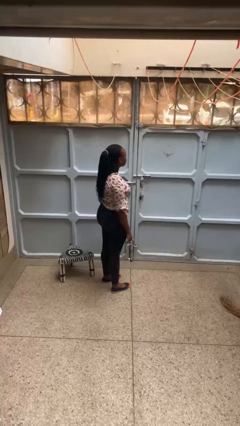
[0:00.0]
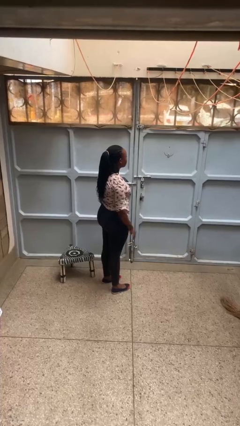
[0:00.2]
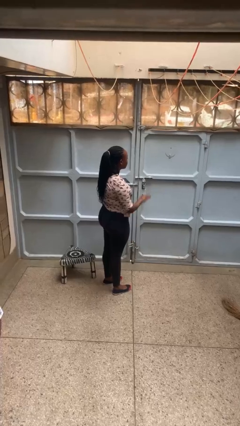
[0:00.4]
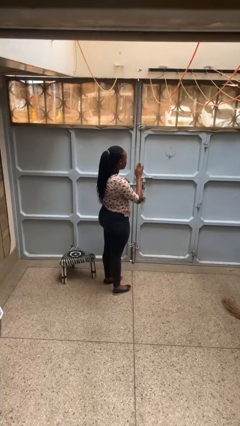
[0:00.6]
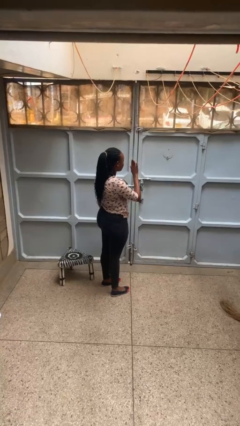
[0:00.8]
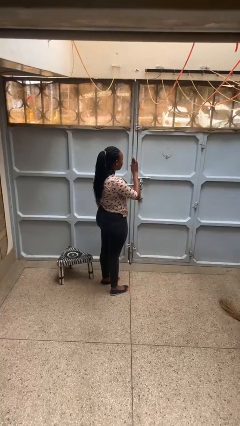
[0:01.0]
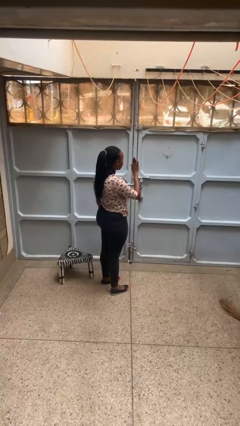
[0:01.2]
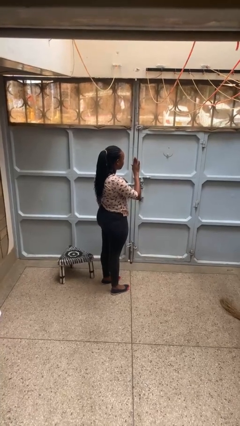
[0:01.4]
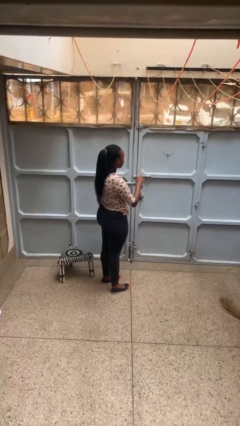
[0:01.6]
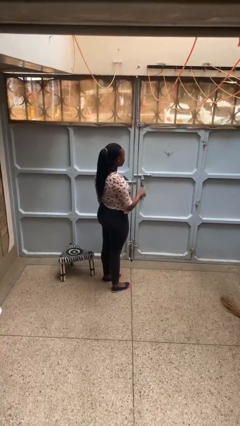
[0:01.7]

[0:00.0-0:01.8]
person gestures stop

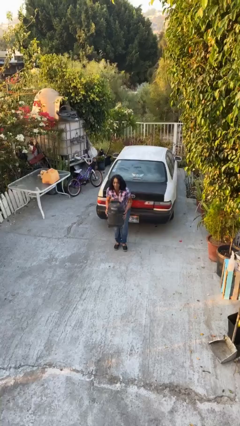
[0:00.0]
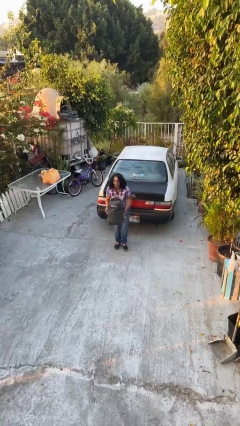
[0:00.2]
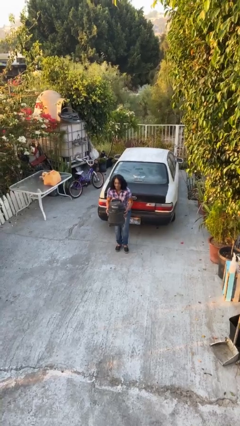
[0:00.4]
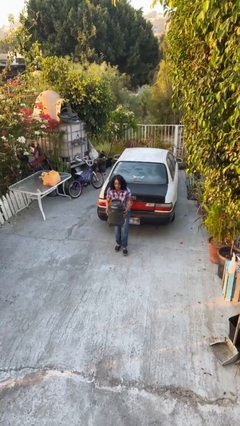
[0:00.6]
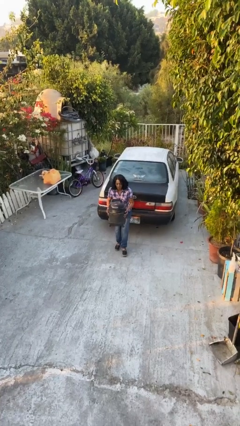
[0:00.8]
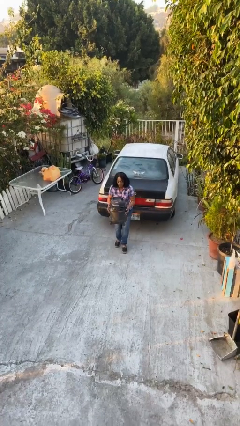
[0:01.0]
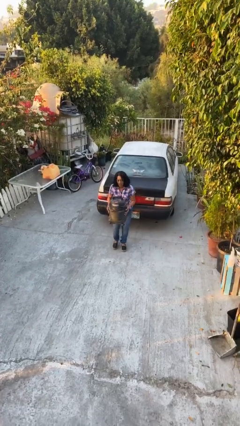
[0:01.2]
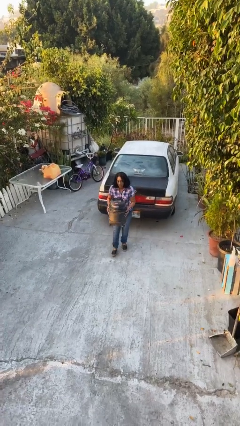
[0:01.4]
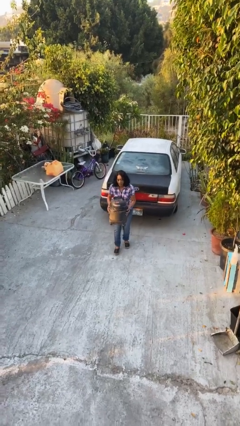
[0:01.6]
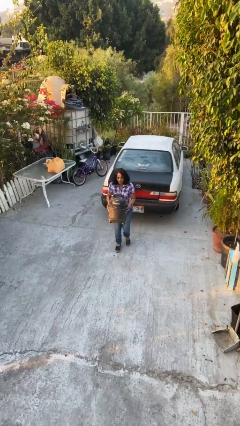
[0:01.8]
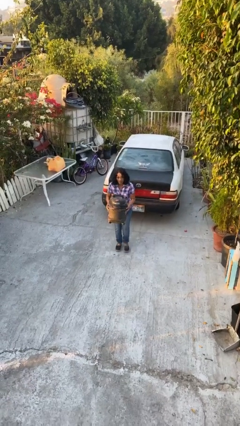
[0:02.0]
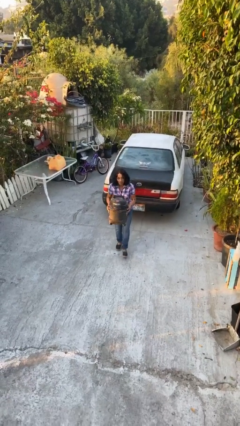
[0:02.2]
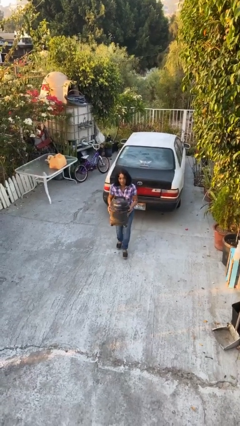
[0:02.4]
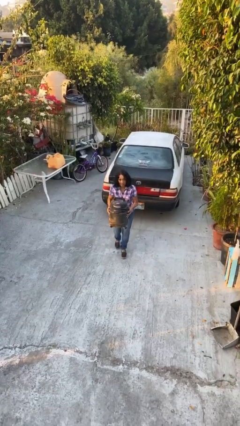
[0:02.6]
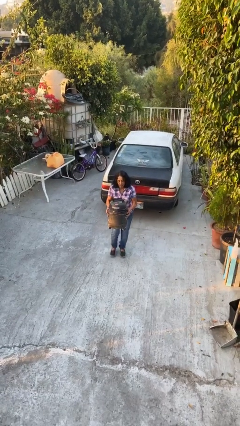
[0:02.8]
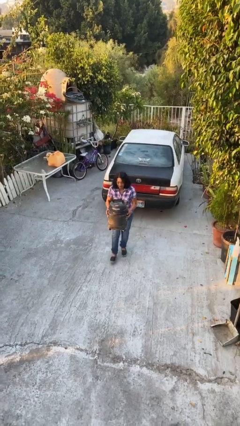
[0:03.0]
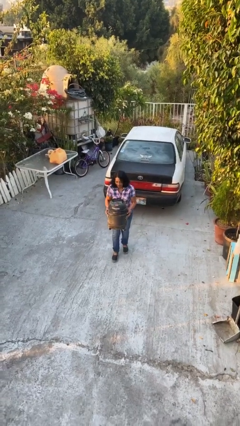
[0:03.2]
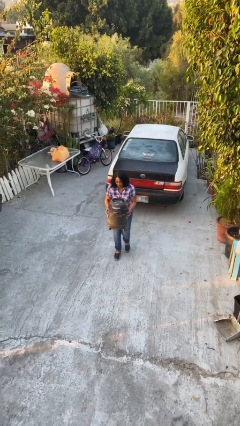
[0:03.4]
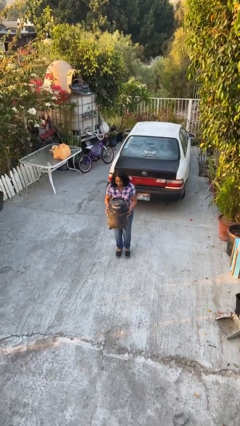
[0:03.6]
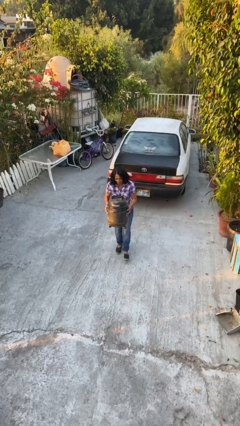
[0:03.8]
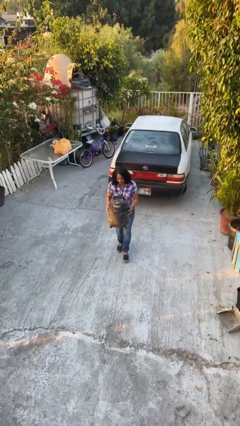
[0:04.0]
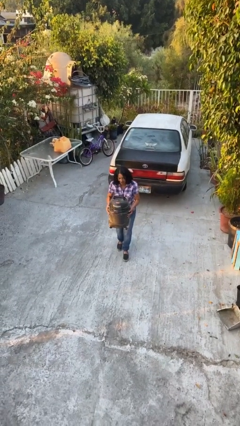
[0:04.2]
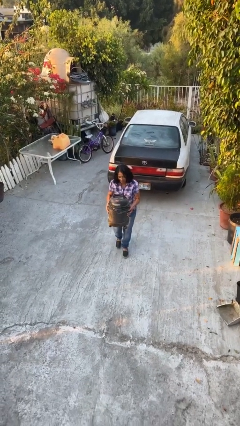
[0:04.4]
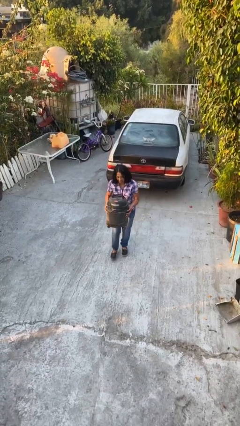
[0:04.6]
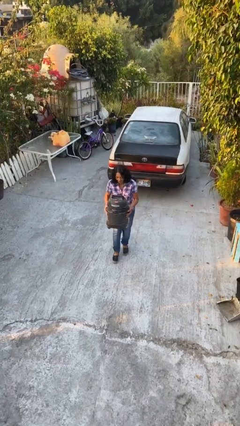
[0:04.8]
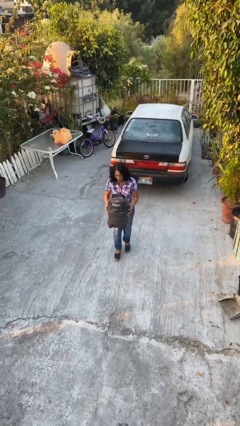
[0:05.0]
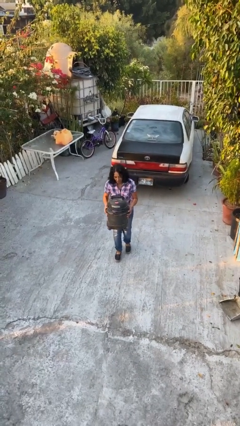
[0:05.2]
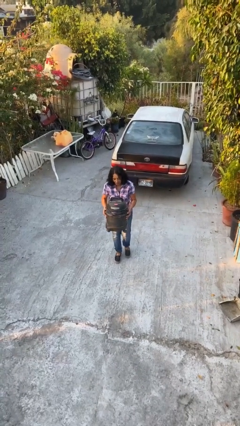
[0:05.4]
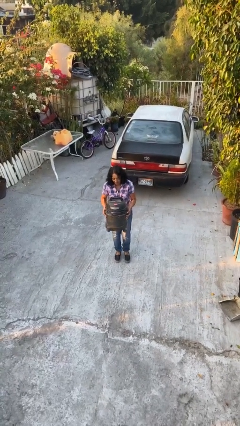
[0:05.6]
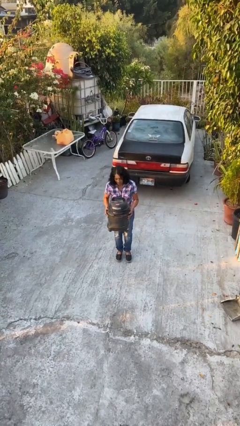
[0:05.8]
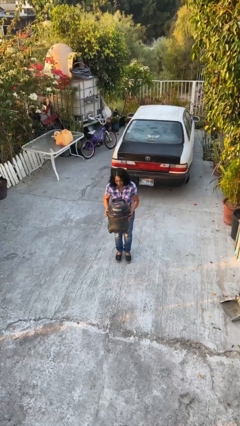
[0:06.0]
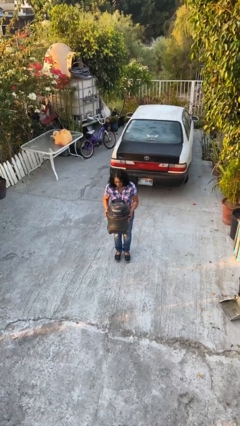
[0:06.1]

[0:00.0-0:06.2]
person carries heavy object

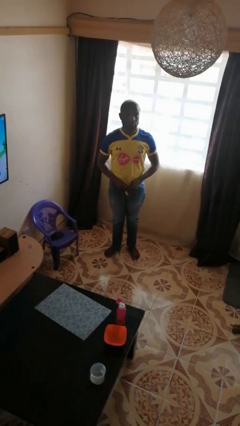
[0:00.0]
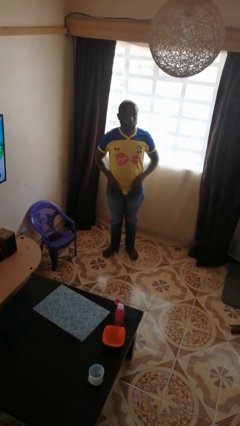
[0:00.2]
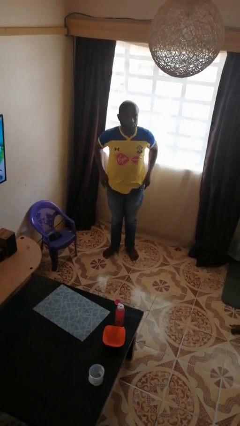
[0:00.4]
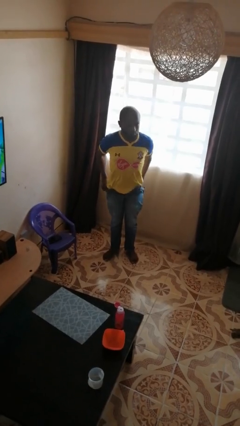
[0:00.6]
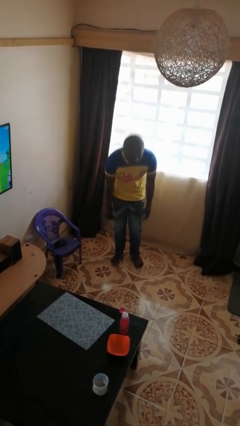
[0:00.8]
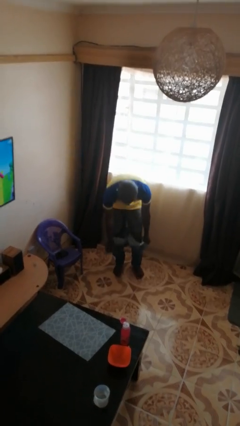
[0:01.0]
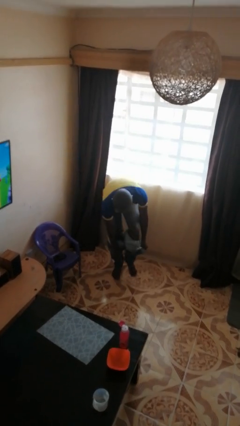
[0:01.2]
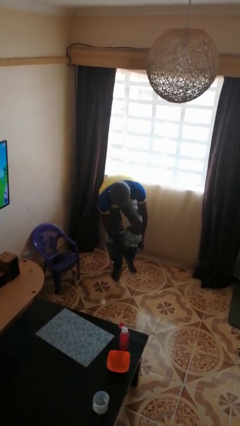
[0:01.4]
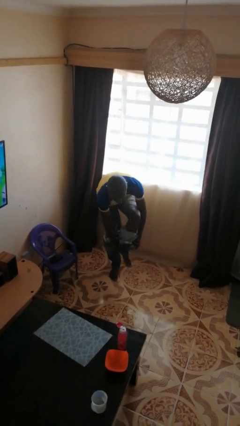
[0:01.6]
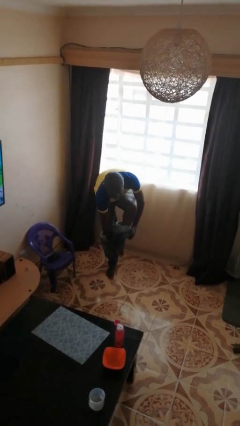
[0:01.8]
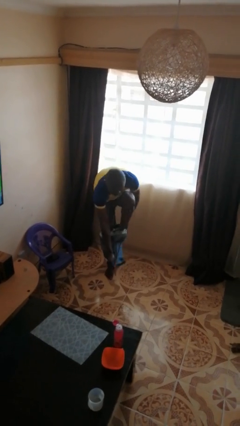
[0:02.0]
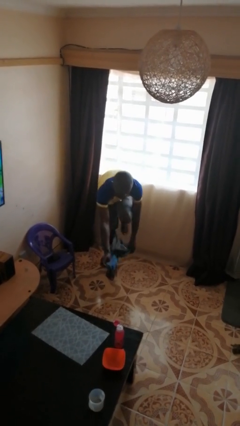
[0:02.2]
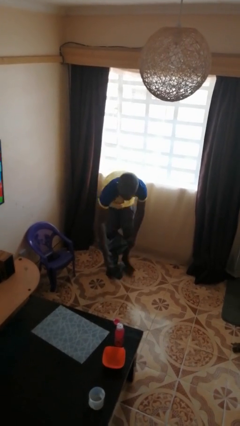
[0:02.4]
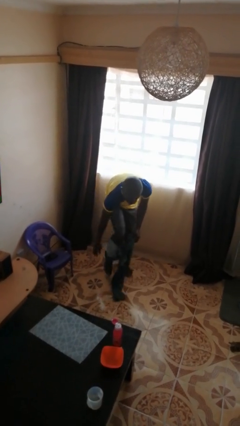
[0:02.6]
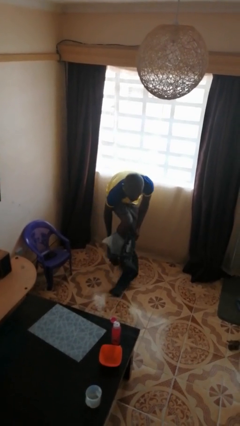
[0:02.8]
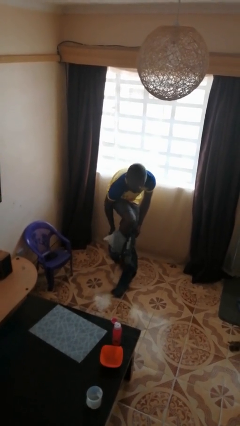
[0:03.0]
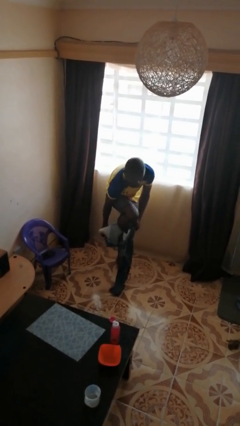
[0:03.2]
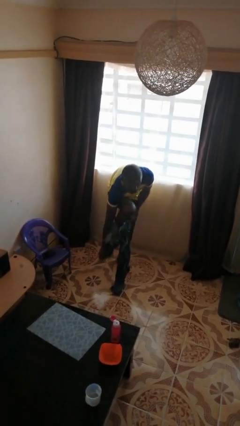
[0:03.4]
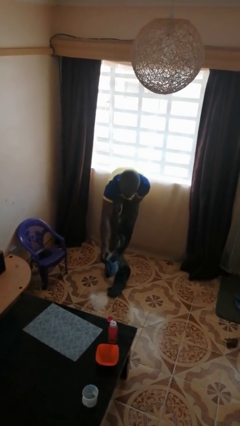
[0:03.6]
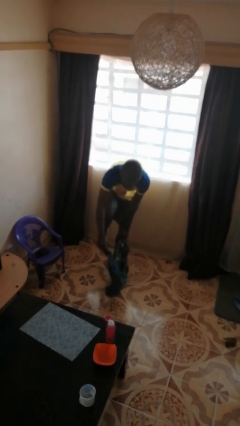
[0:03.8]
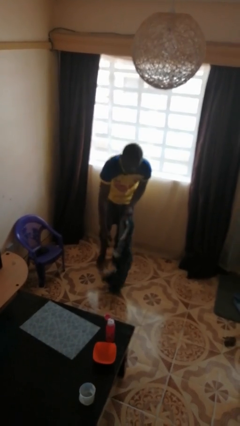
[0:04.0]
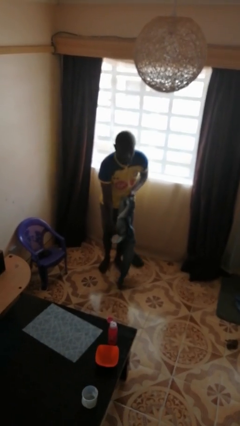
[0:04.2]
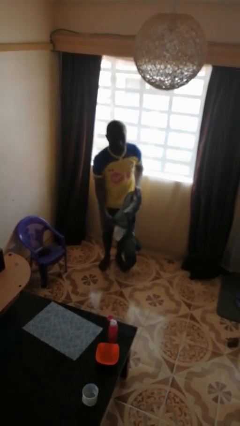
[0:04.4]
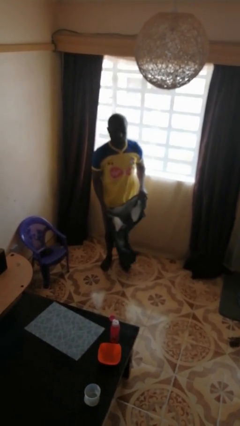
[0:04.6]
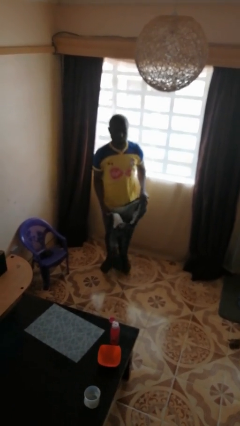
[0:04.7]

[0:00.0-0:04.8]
person takes off pants

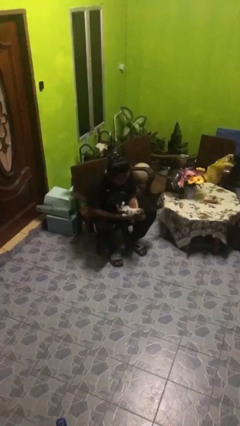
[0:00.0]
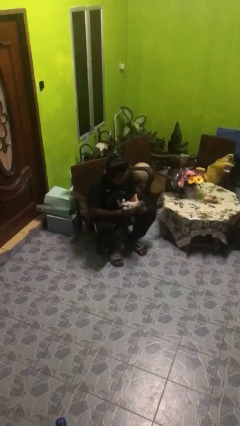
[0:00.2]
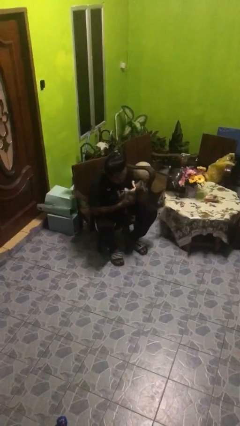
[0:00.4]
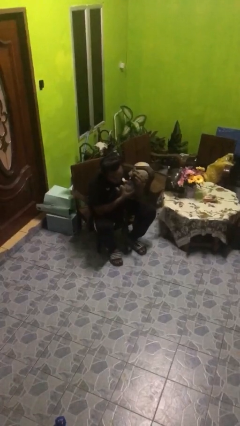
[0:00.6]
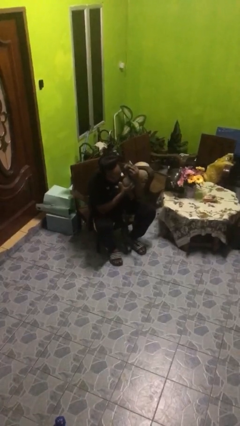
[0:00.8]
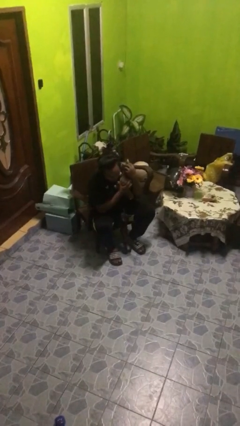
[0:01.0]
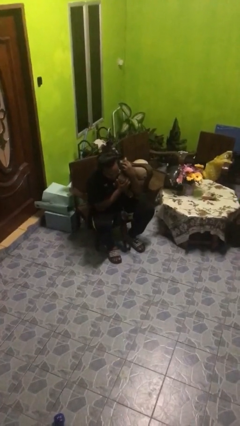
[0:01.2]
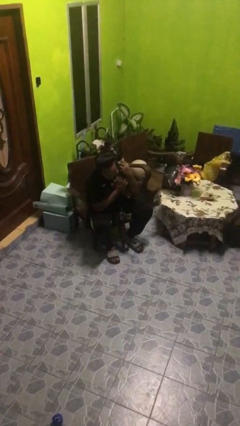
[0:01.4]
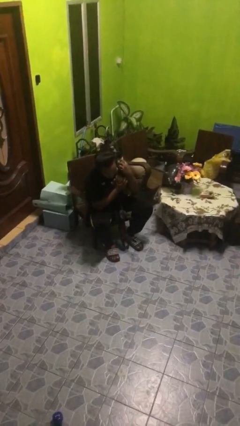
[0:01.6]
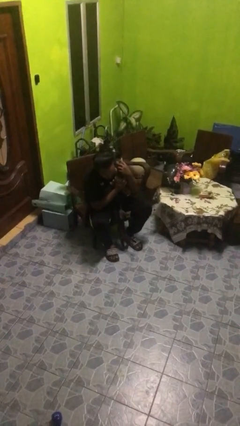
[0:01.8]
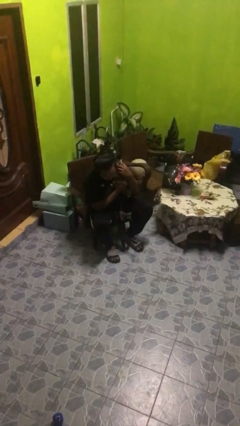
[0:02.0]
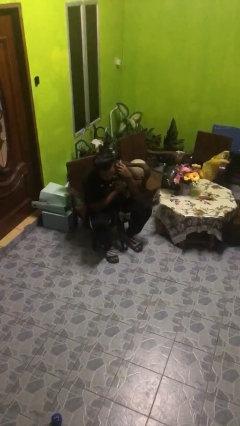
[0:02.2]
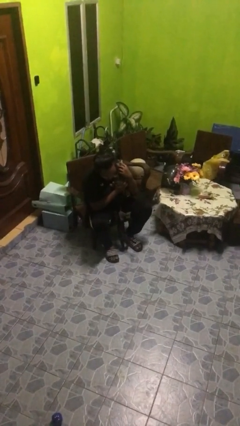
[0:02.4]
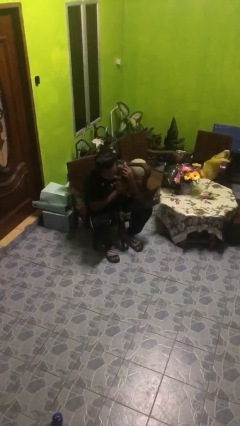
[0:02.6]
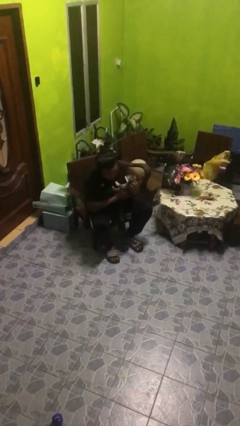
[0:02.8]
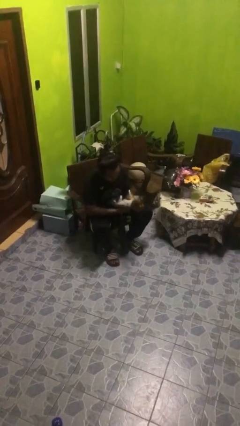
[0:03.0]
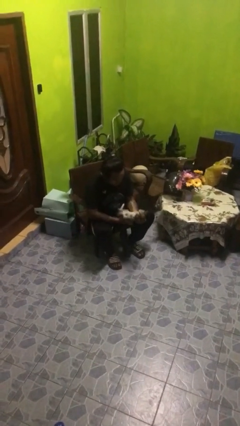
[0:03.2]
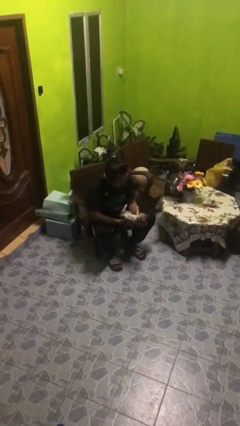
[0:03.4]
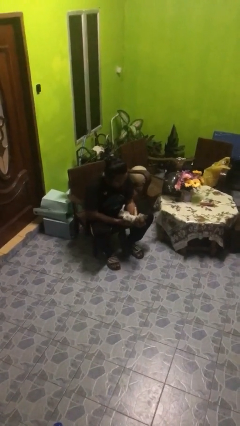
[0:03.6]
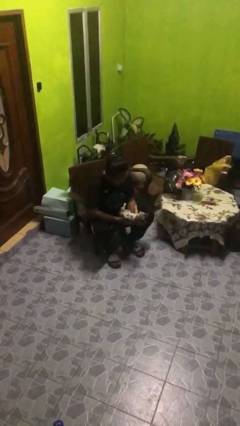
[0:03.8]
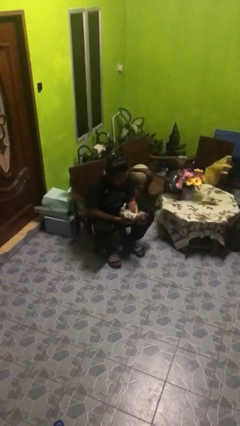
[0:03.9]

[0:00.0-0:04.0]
person hugs cat

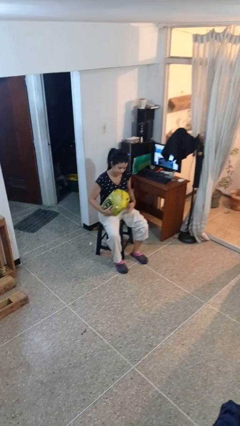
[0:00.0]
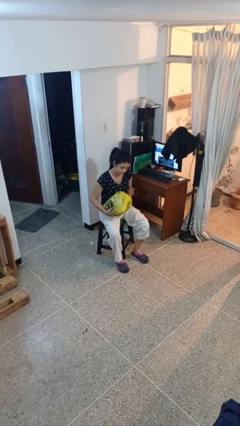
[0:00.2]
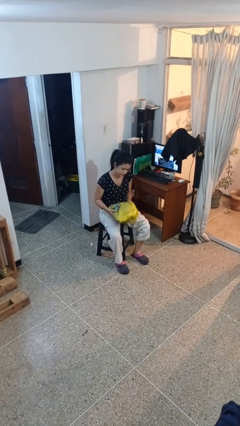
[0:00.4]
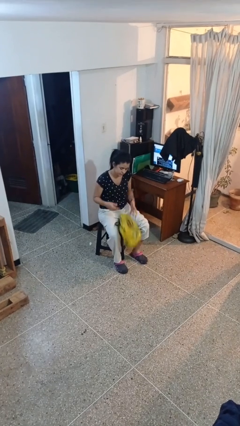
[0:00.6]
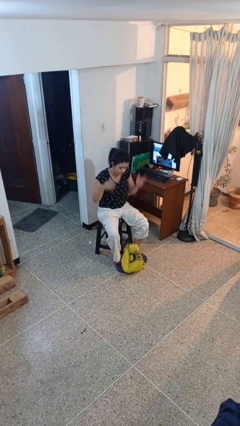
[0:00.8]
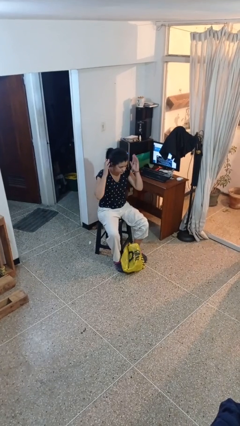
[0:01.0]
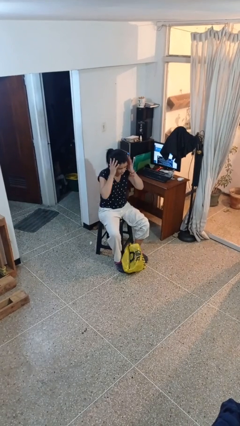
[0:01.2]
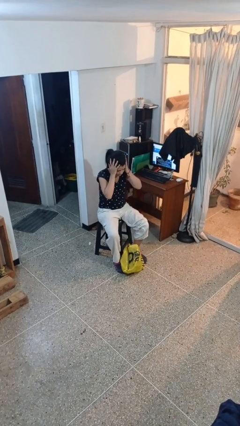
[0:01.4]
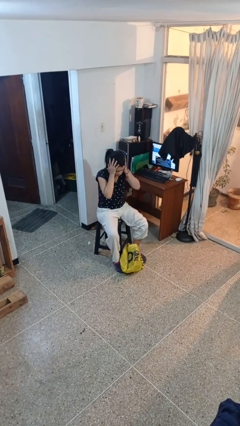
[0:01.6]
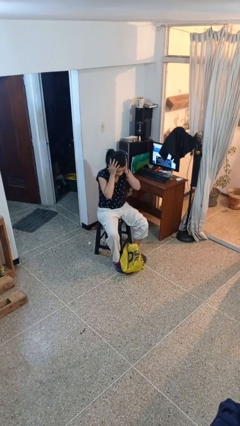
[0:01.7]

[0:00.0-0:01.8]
person drops object
